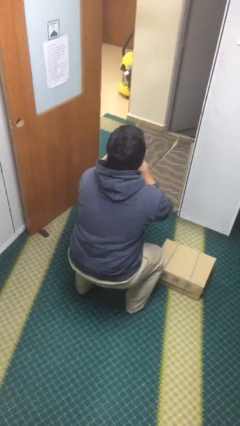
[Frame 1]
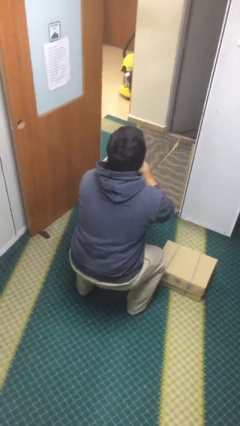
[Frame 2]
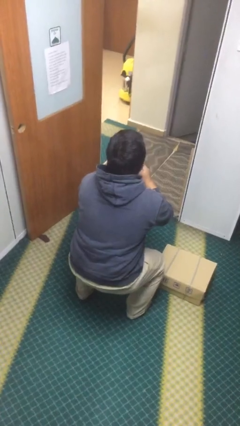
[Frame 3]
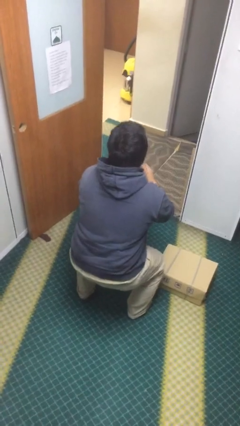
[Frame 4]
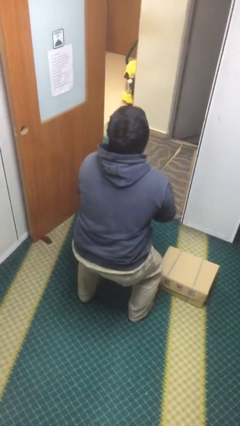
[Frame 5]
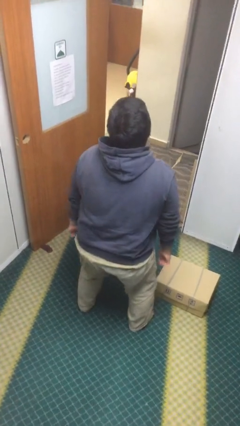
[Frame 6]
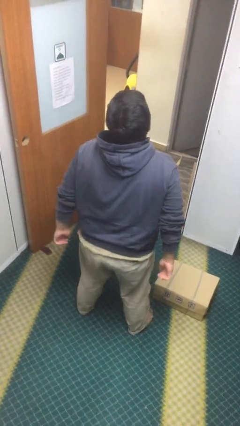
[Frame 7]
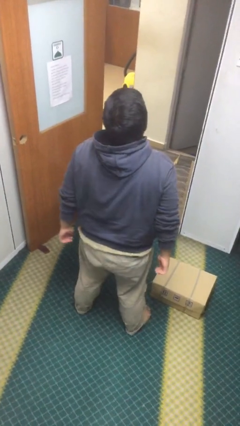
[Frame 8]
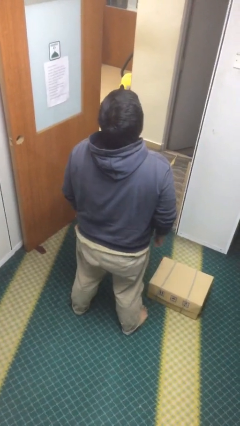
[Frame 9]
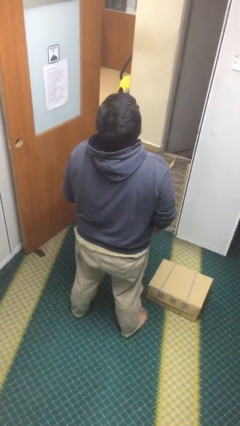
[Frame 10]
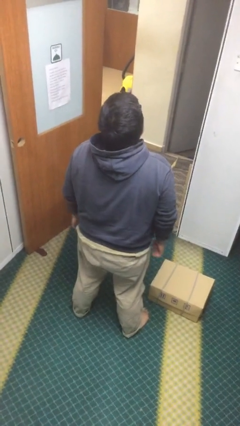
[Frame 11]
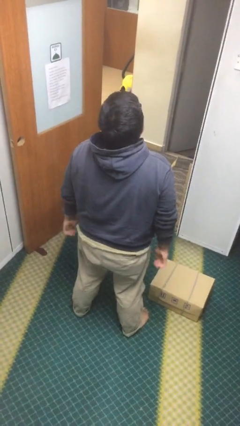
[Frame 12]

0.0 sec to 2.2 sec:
person stands up

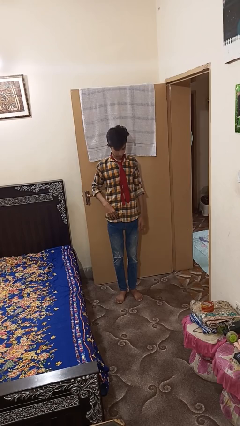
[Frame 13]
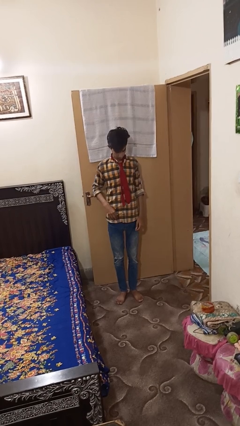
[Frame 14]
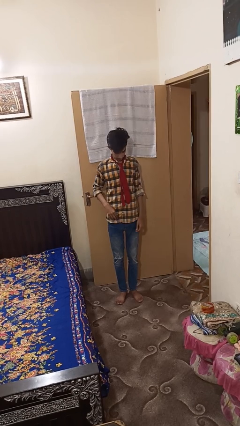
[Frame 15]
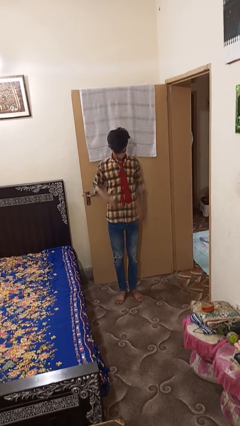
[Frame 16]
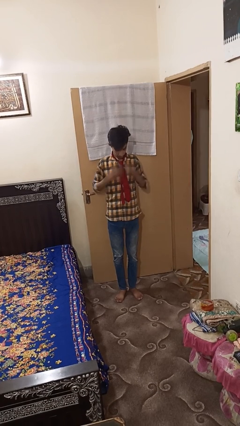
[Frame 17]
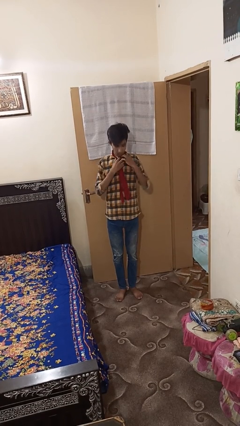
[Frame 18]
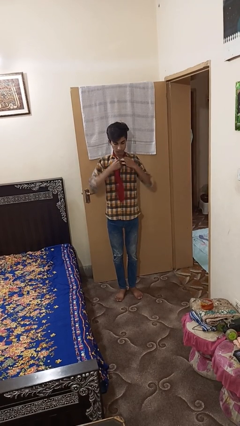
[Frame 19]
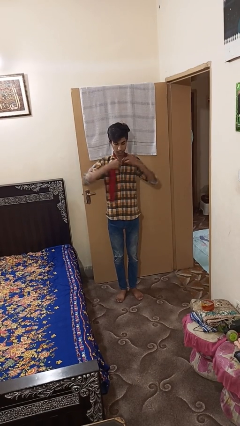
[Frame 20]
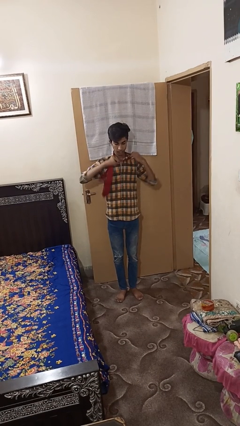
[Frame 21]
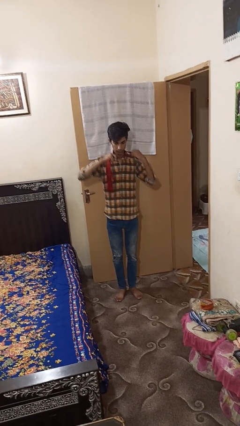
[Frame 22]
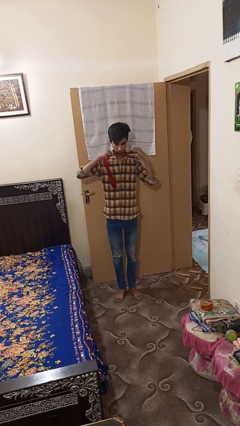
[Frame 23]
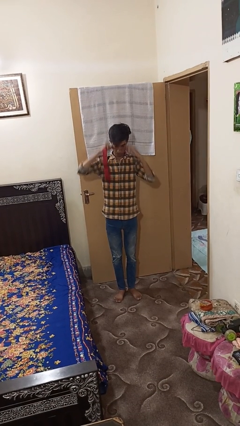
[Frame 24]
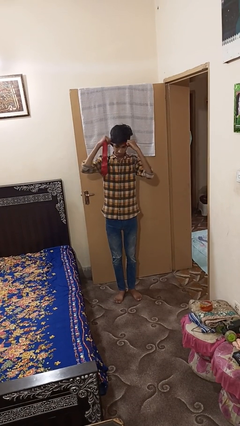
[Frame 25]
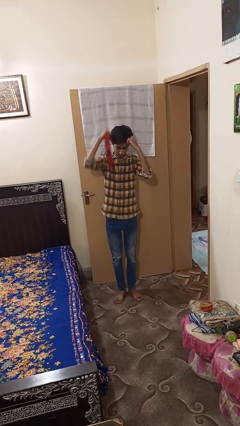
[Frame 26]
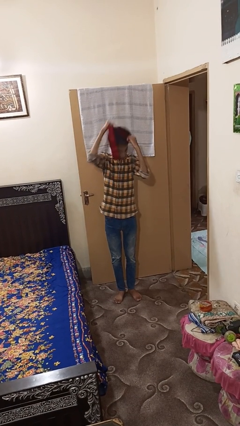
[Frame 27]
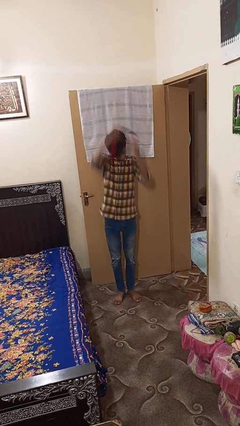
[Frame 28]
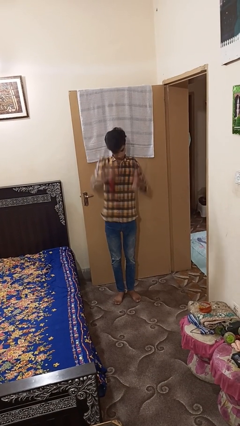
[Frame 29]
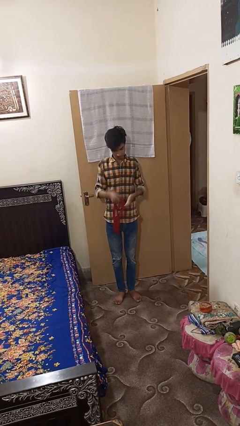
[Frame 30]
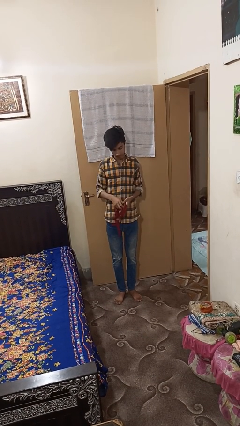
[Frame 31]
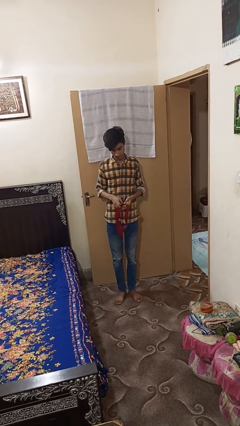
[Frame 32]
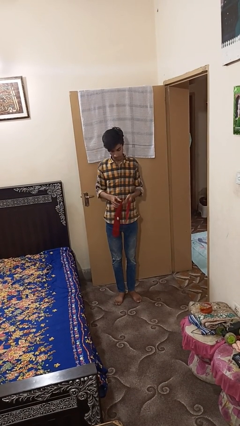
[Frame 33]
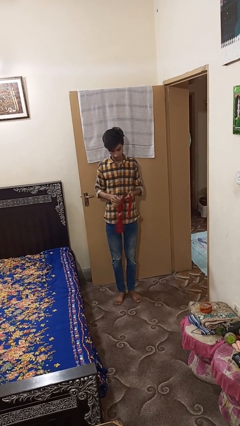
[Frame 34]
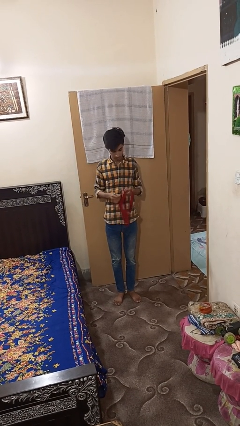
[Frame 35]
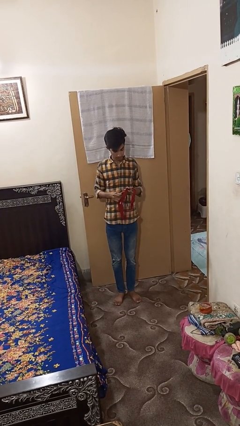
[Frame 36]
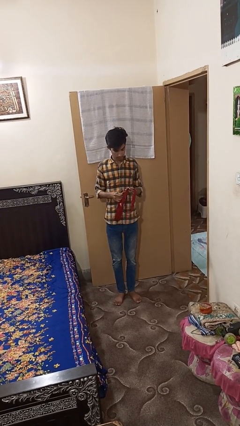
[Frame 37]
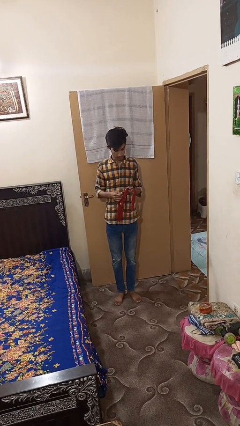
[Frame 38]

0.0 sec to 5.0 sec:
person takes off necktie

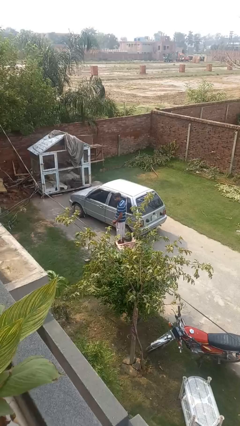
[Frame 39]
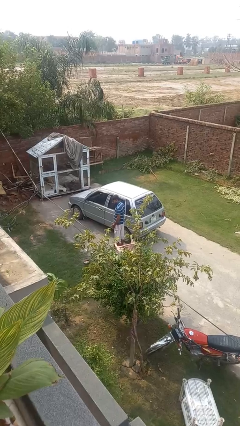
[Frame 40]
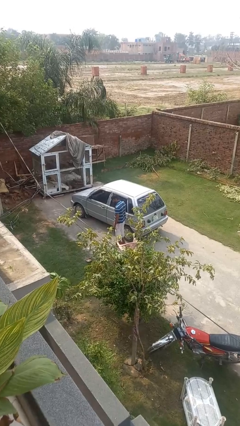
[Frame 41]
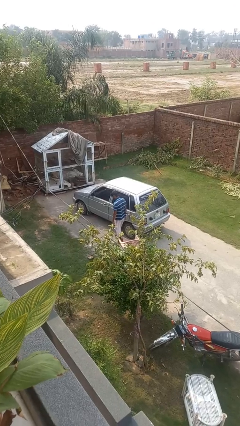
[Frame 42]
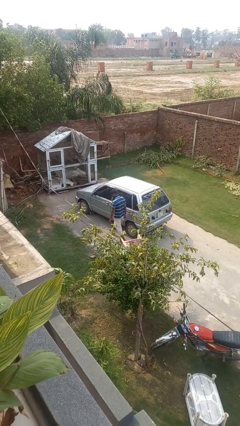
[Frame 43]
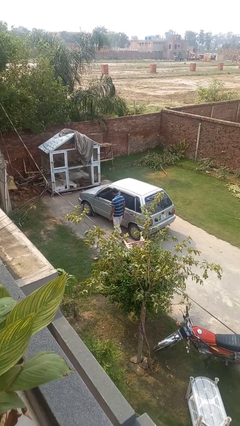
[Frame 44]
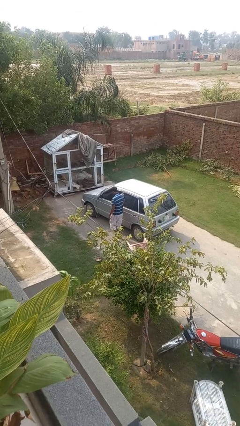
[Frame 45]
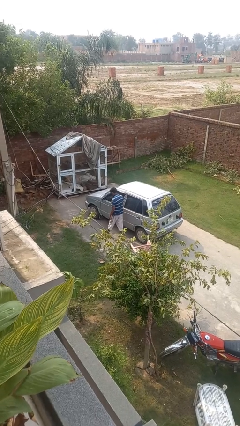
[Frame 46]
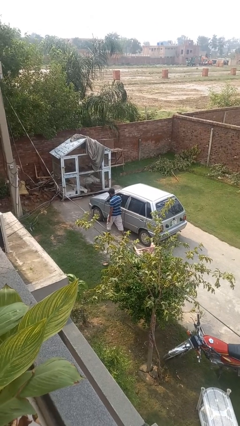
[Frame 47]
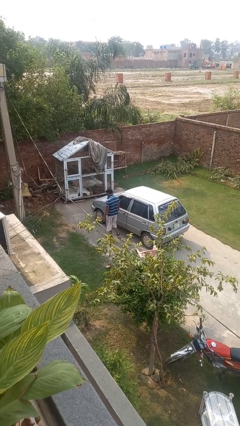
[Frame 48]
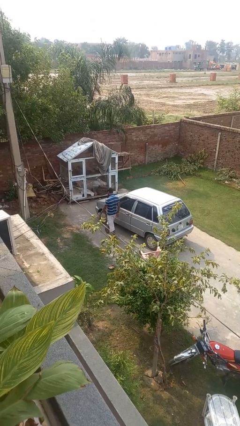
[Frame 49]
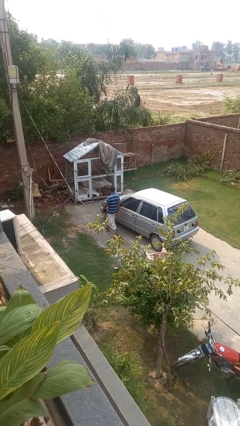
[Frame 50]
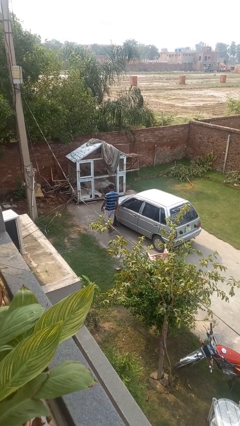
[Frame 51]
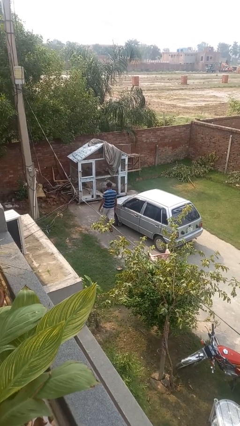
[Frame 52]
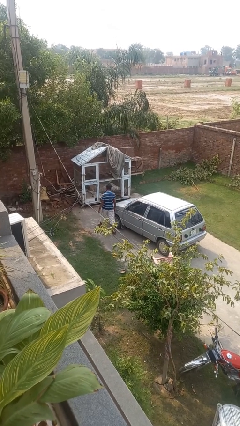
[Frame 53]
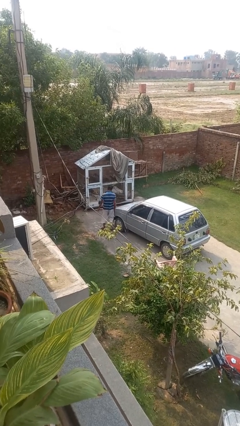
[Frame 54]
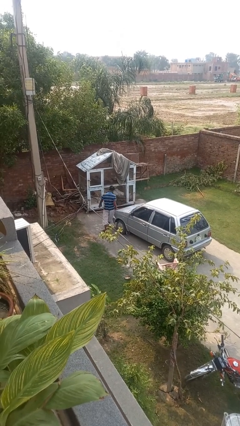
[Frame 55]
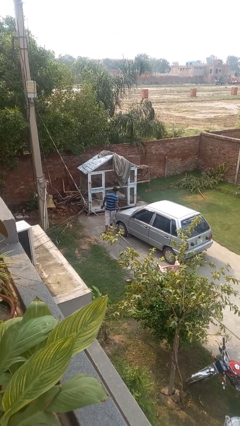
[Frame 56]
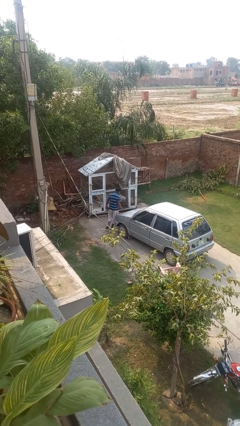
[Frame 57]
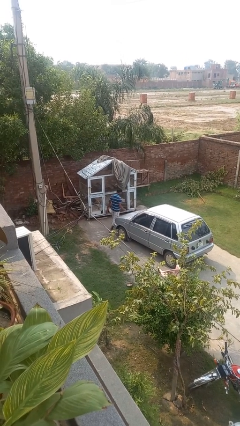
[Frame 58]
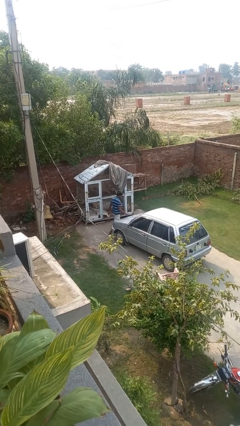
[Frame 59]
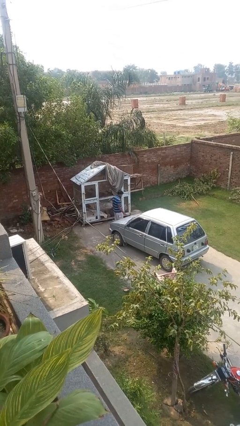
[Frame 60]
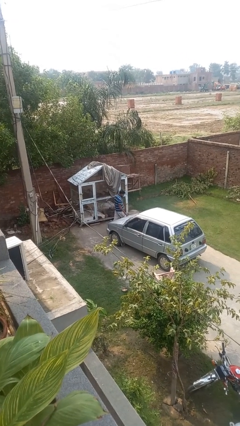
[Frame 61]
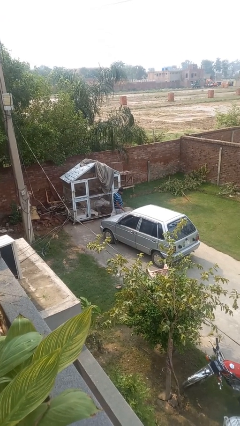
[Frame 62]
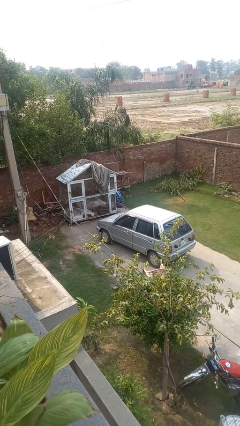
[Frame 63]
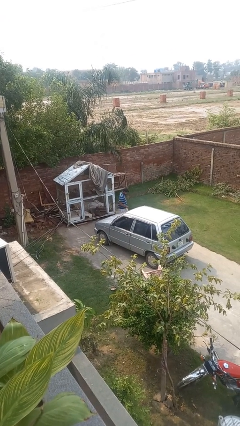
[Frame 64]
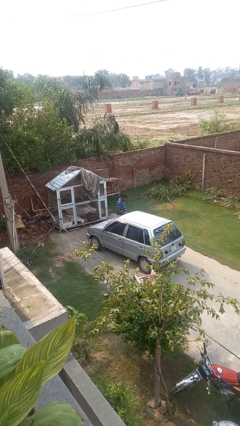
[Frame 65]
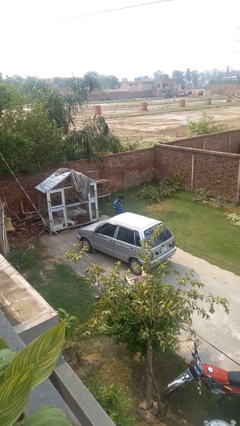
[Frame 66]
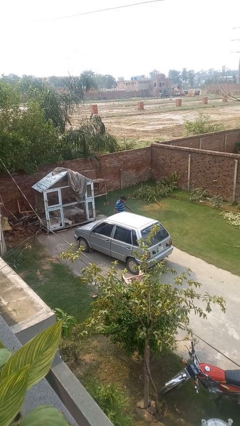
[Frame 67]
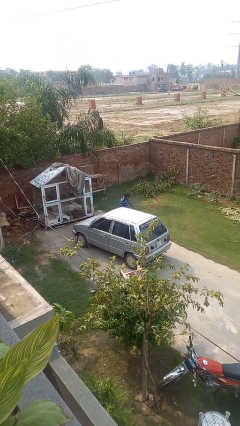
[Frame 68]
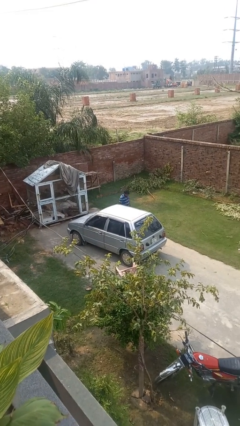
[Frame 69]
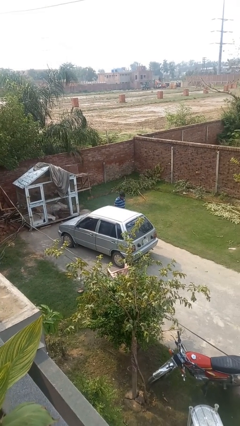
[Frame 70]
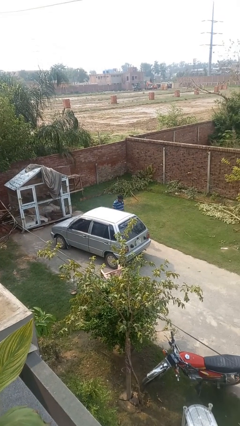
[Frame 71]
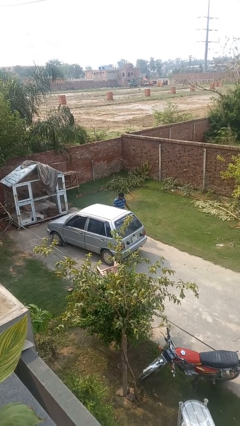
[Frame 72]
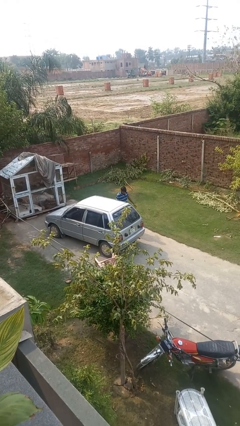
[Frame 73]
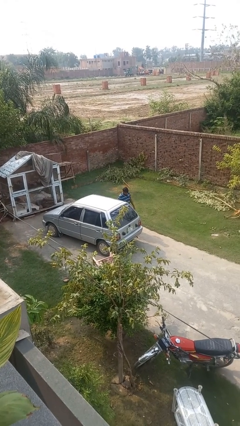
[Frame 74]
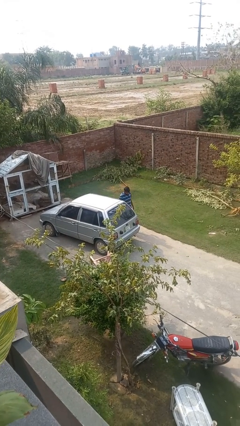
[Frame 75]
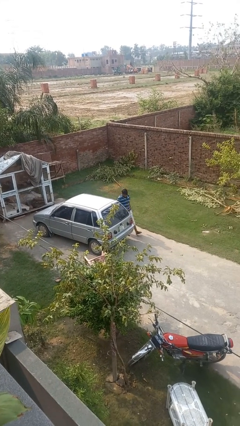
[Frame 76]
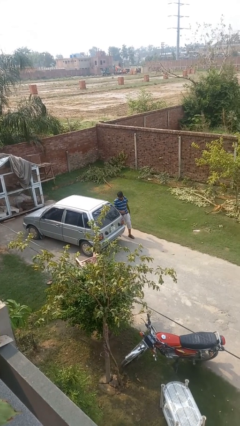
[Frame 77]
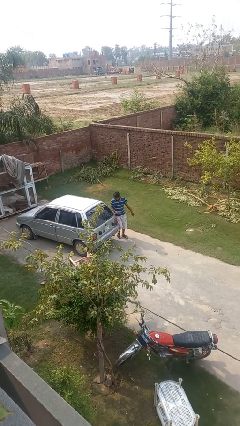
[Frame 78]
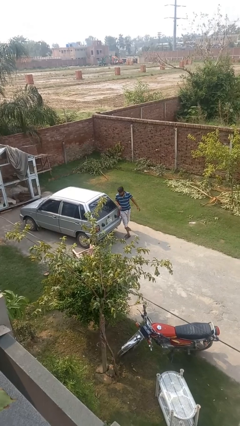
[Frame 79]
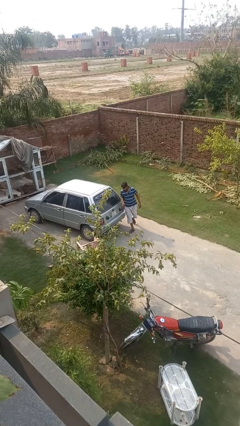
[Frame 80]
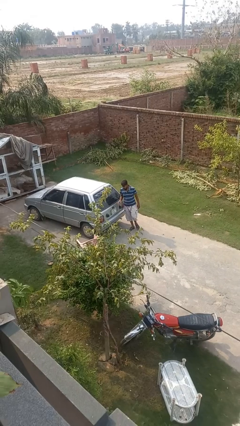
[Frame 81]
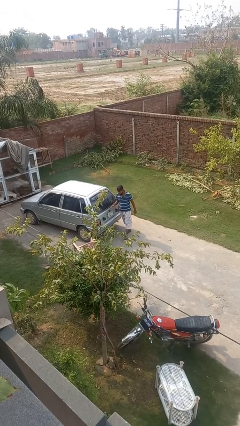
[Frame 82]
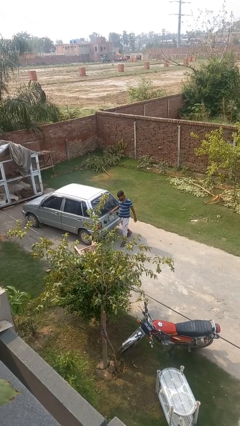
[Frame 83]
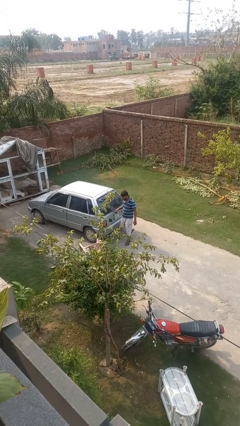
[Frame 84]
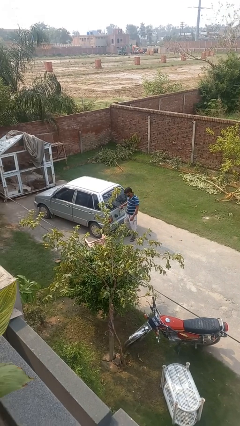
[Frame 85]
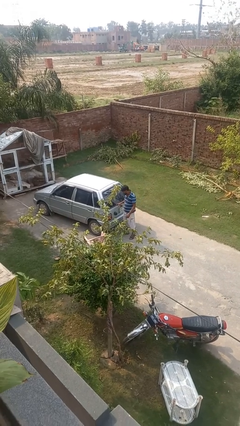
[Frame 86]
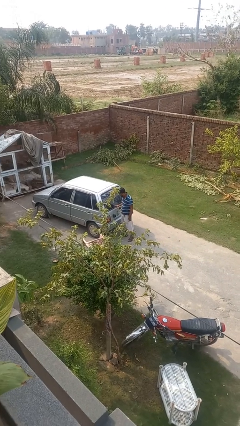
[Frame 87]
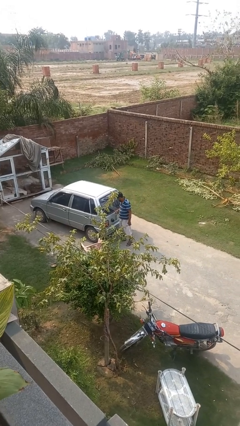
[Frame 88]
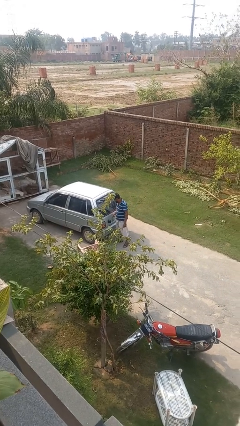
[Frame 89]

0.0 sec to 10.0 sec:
person walks around car

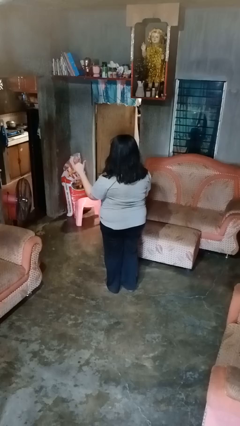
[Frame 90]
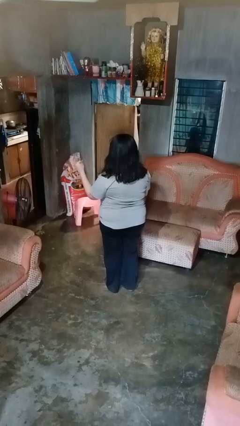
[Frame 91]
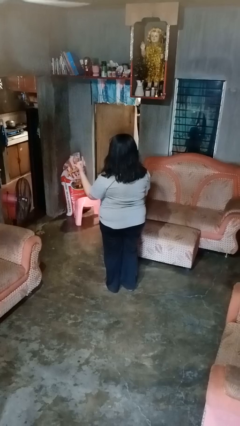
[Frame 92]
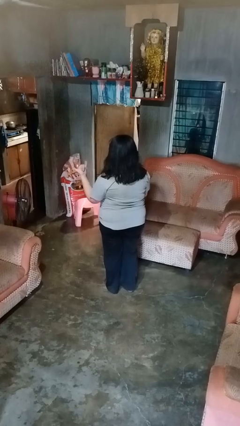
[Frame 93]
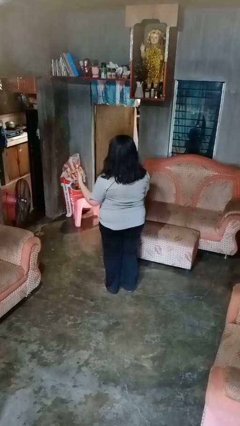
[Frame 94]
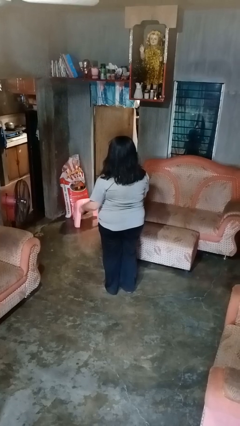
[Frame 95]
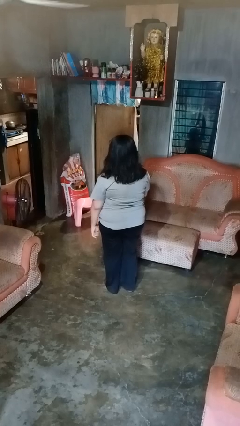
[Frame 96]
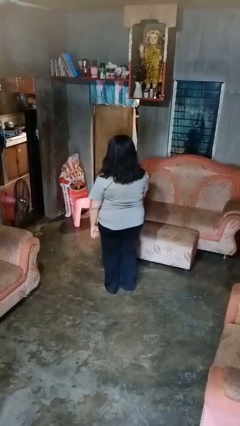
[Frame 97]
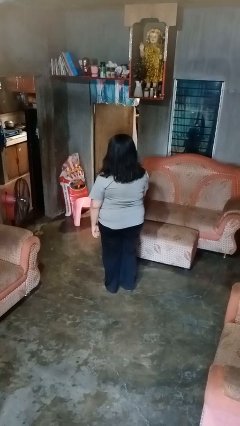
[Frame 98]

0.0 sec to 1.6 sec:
person gestures hang loose
